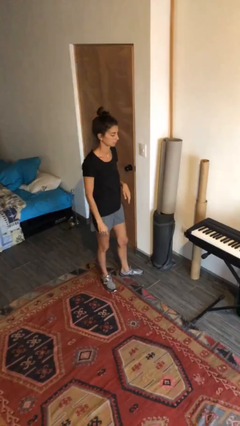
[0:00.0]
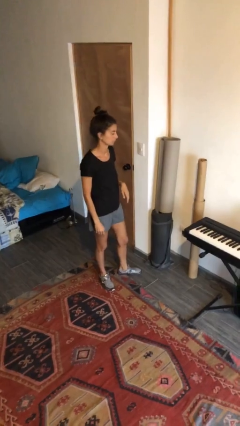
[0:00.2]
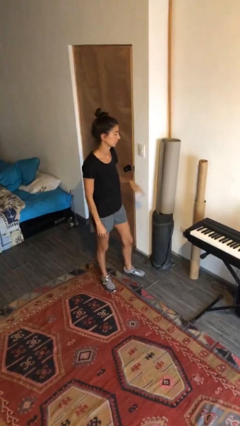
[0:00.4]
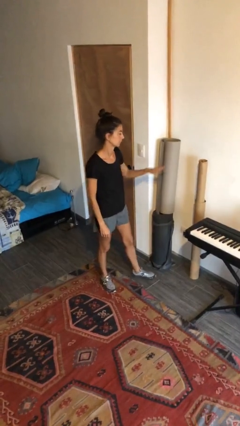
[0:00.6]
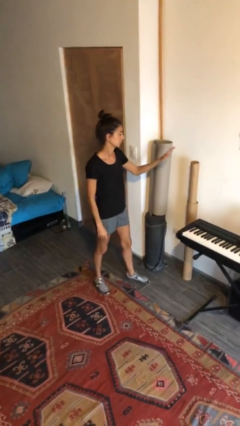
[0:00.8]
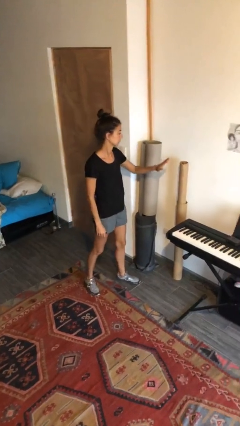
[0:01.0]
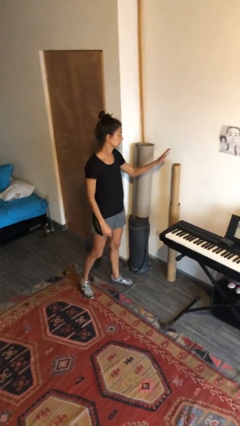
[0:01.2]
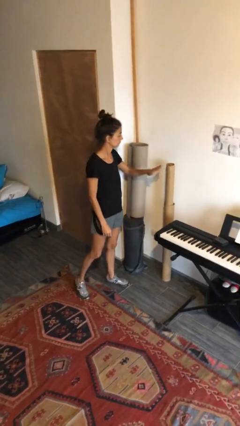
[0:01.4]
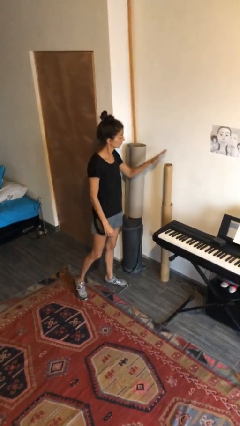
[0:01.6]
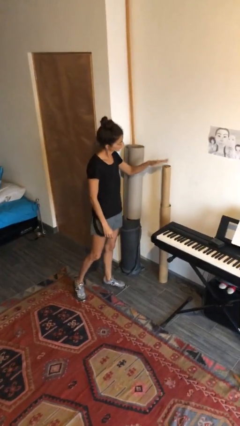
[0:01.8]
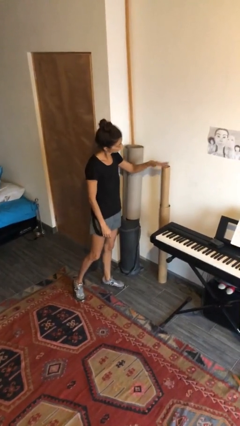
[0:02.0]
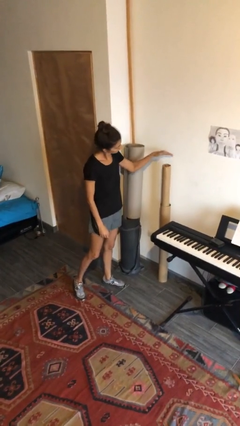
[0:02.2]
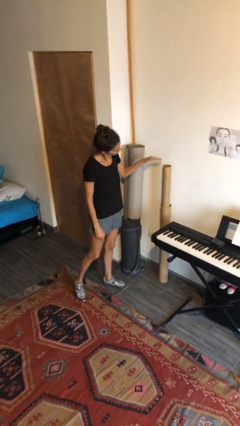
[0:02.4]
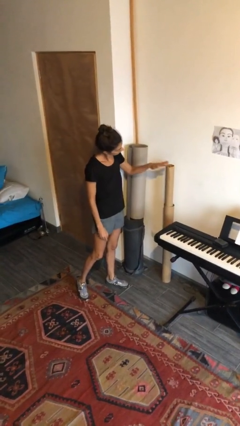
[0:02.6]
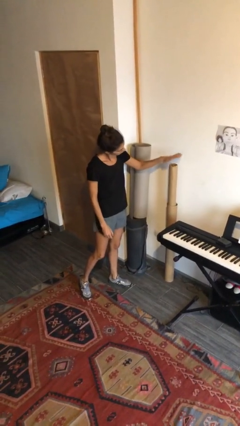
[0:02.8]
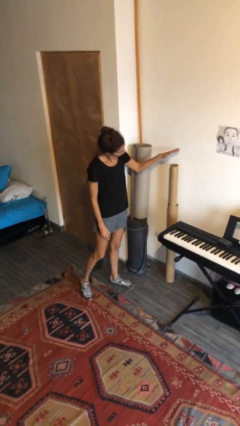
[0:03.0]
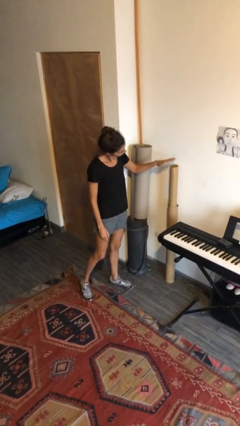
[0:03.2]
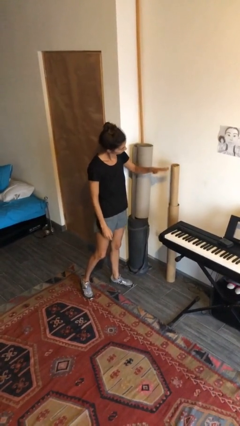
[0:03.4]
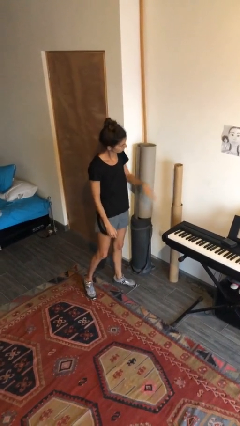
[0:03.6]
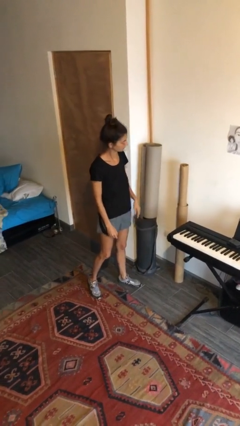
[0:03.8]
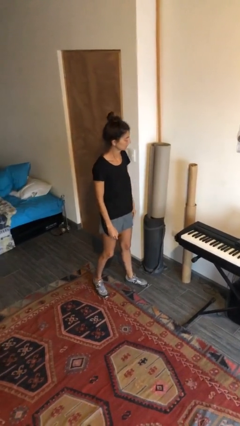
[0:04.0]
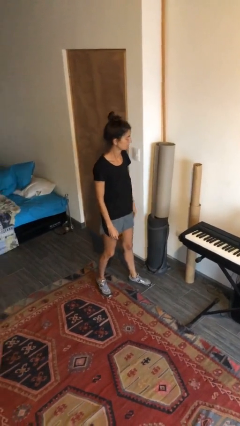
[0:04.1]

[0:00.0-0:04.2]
person waves hand over object

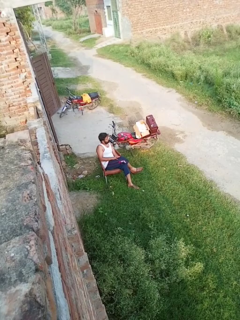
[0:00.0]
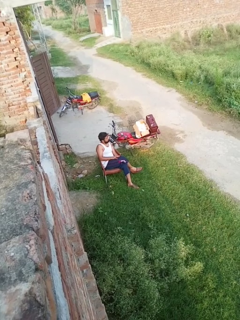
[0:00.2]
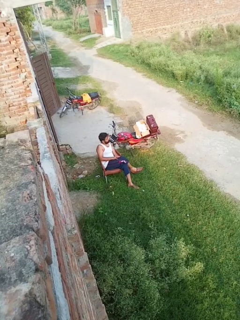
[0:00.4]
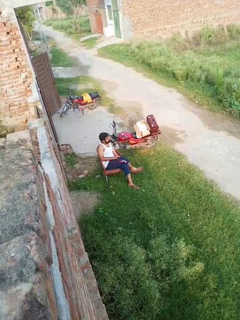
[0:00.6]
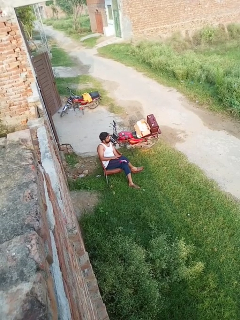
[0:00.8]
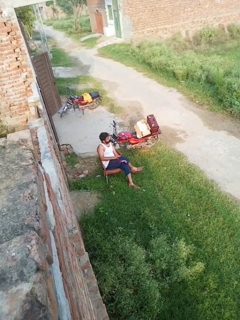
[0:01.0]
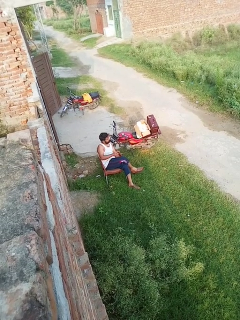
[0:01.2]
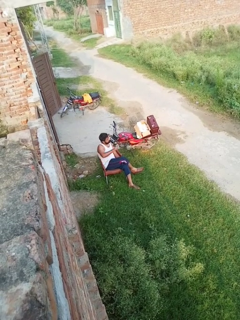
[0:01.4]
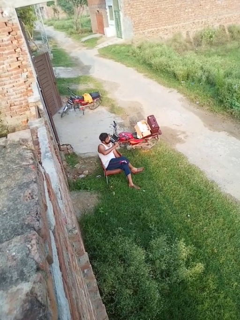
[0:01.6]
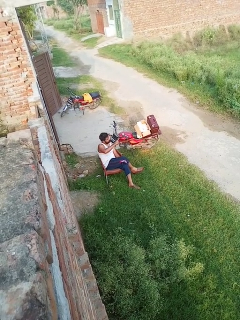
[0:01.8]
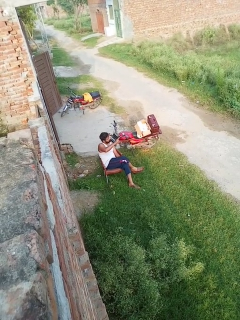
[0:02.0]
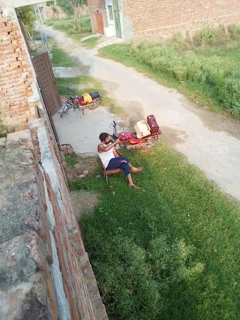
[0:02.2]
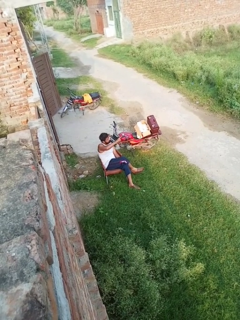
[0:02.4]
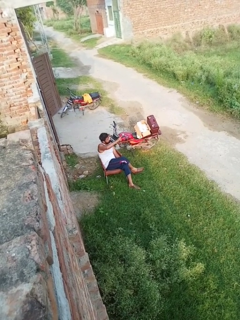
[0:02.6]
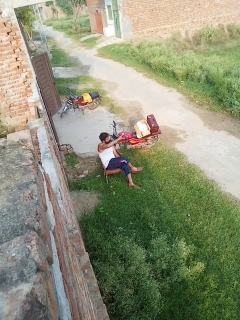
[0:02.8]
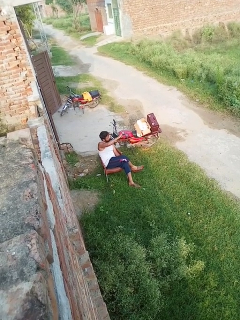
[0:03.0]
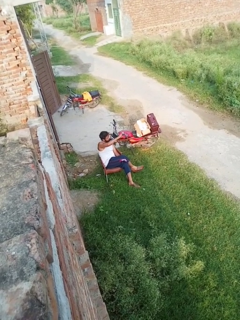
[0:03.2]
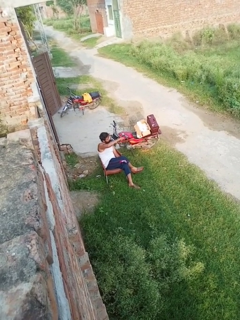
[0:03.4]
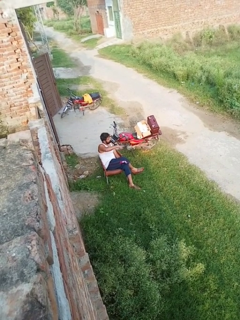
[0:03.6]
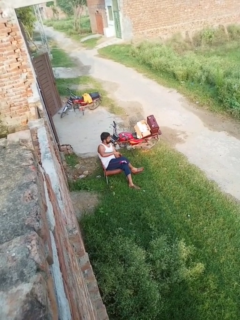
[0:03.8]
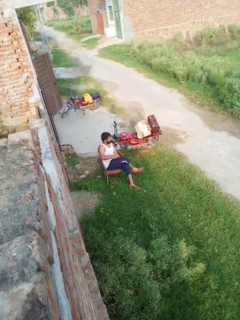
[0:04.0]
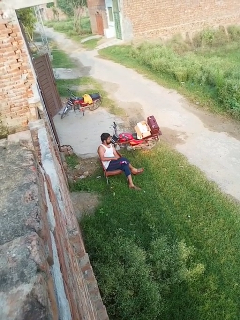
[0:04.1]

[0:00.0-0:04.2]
person points at person

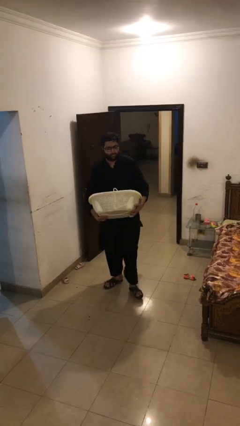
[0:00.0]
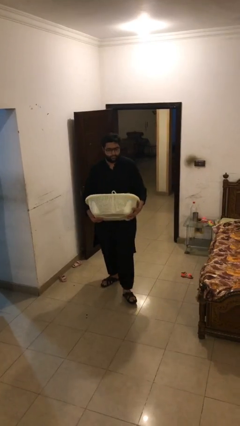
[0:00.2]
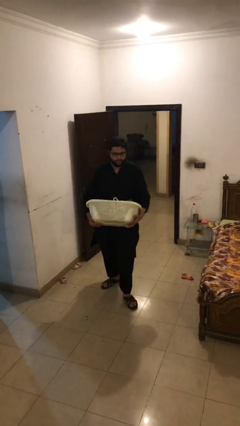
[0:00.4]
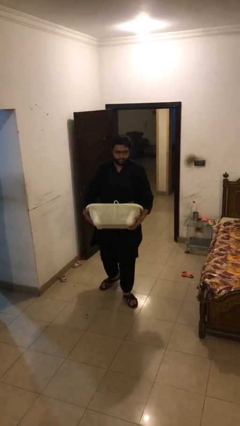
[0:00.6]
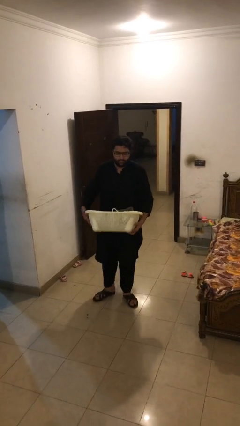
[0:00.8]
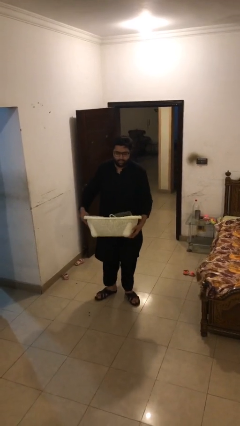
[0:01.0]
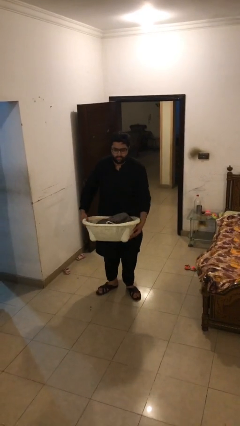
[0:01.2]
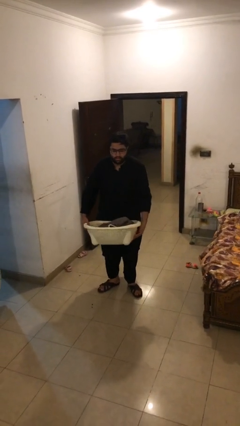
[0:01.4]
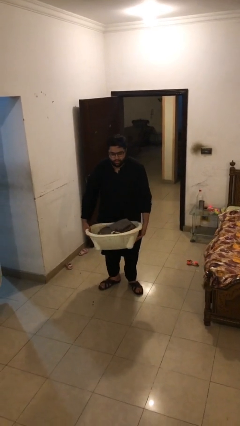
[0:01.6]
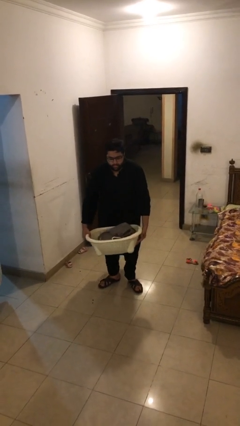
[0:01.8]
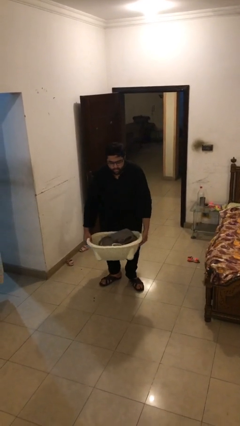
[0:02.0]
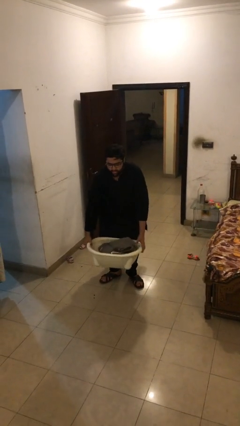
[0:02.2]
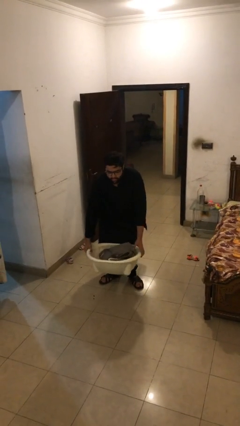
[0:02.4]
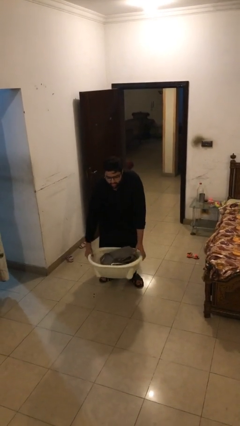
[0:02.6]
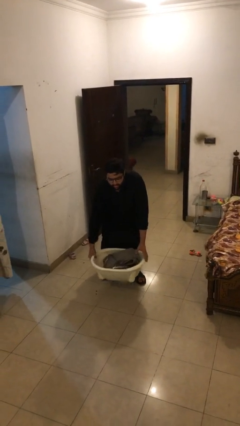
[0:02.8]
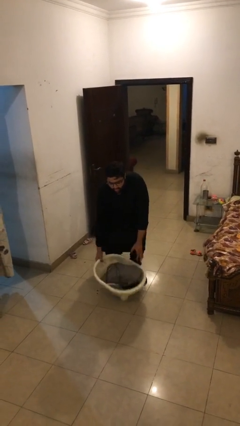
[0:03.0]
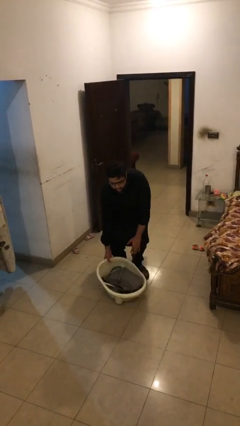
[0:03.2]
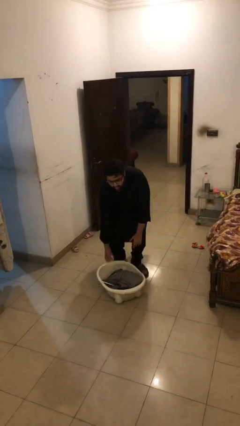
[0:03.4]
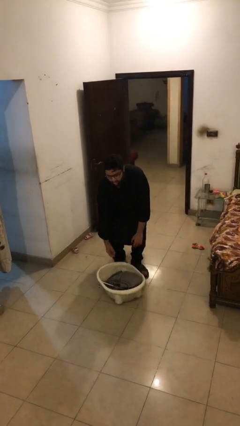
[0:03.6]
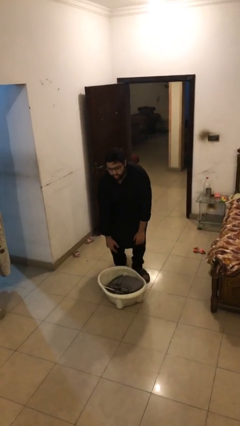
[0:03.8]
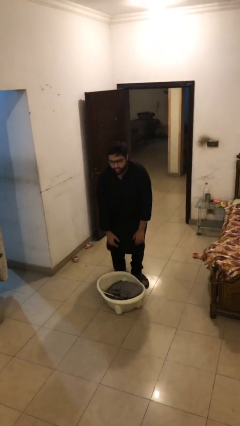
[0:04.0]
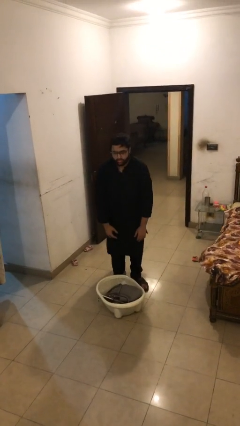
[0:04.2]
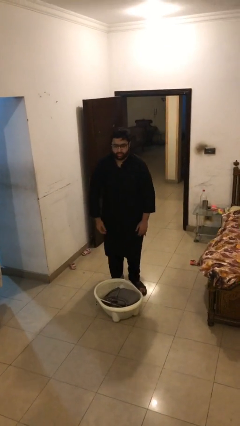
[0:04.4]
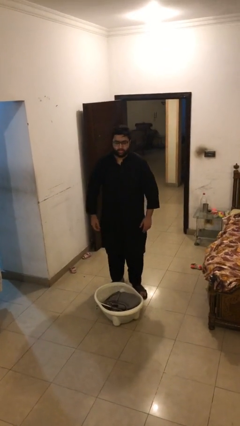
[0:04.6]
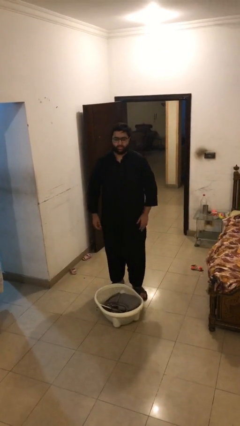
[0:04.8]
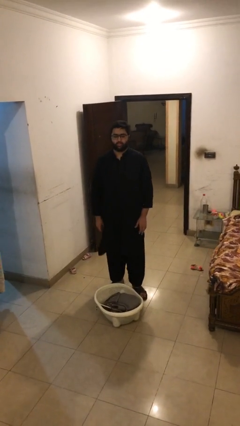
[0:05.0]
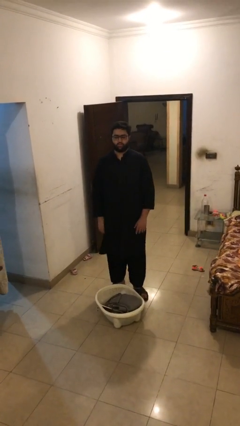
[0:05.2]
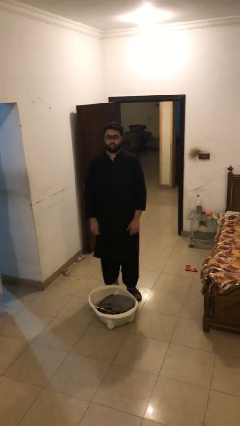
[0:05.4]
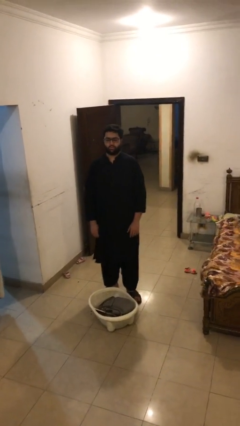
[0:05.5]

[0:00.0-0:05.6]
person puts down object on floor

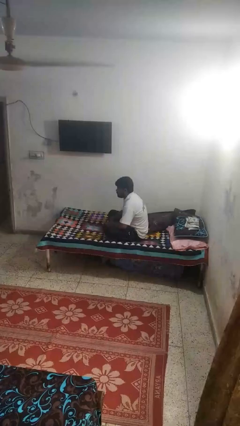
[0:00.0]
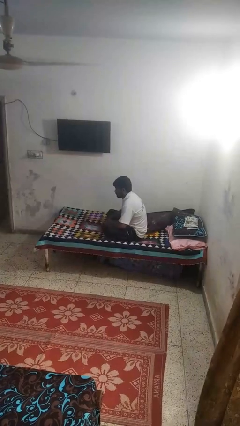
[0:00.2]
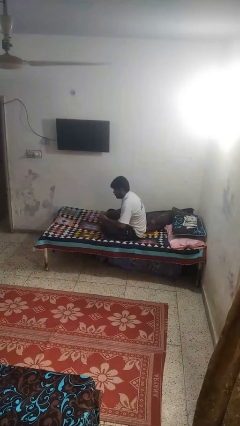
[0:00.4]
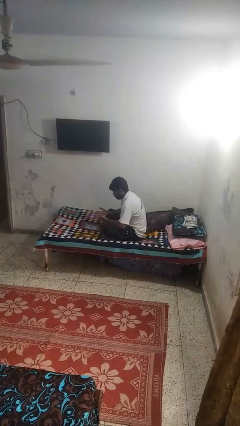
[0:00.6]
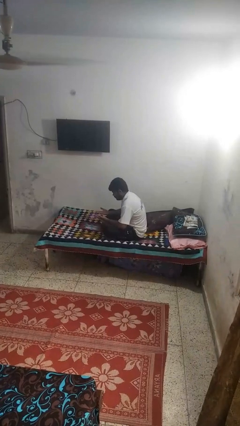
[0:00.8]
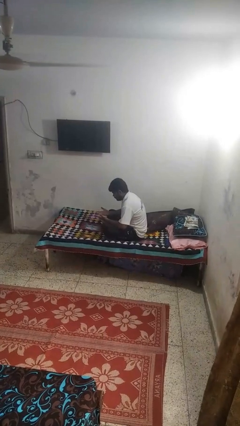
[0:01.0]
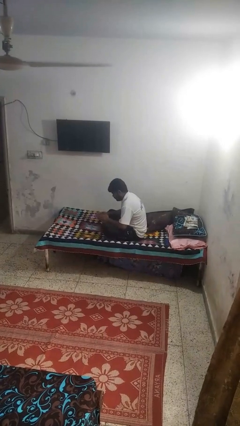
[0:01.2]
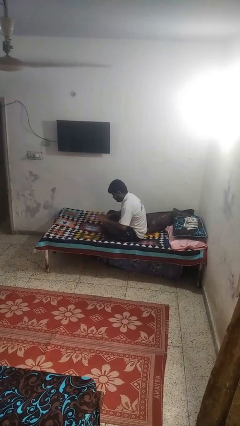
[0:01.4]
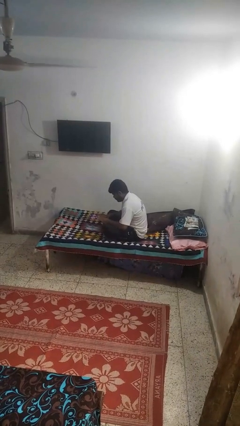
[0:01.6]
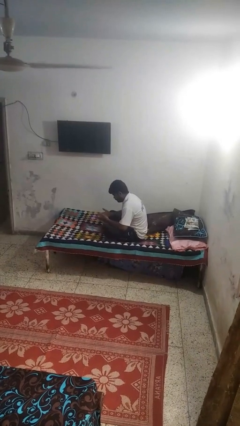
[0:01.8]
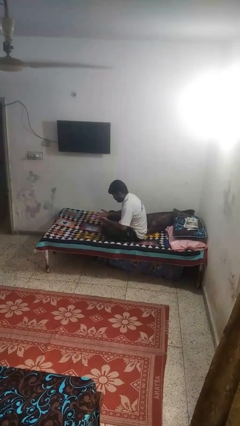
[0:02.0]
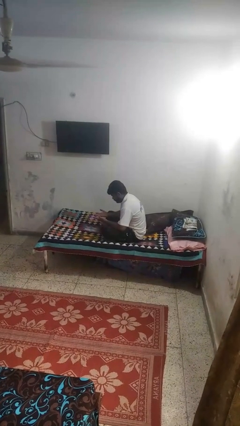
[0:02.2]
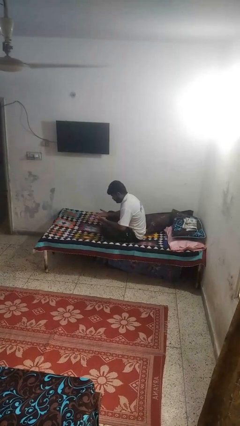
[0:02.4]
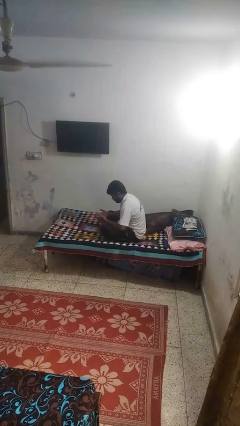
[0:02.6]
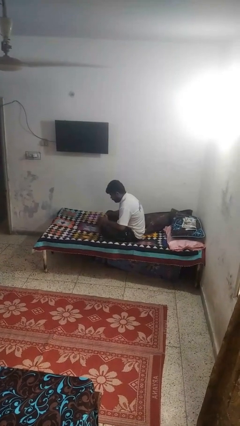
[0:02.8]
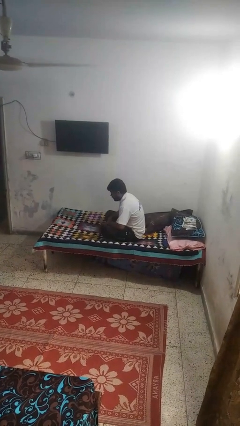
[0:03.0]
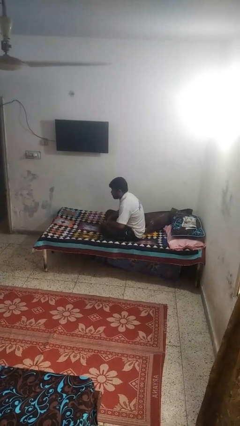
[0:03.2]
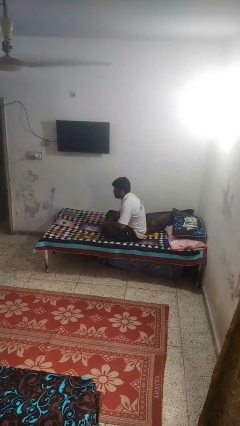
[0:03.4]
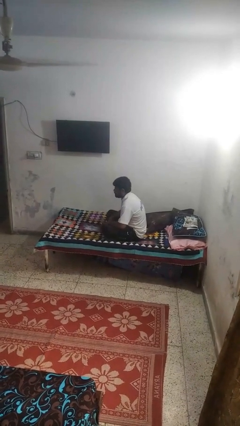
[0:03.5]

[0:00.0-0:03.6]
person looks at hands in lap

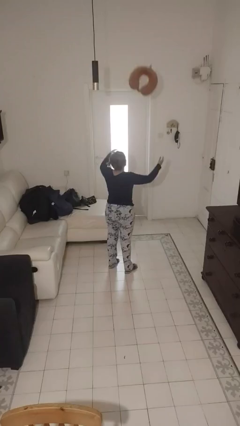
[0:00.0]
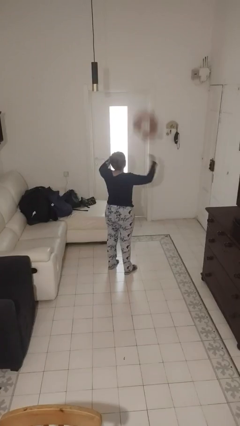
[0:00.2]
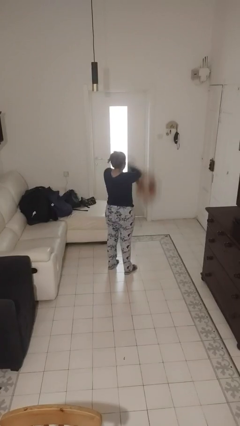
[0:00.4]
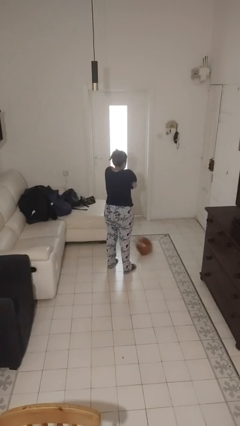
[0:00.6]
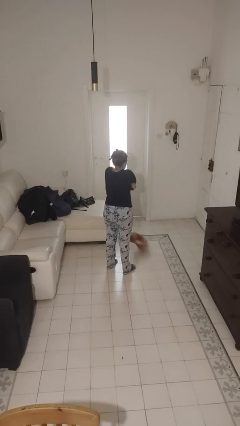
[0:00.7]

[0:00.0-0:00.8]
person catches dropped object
